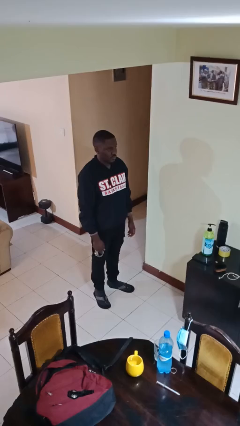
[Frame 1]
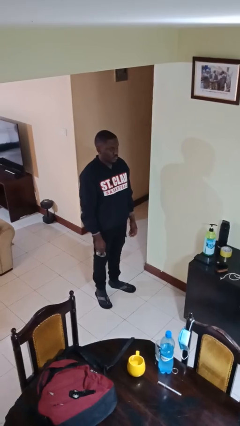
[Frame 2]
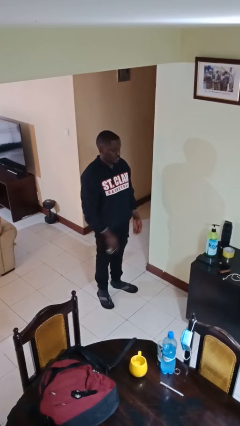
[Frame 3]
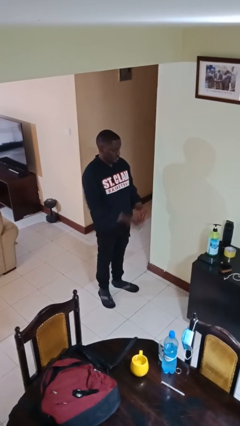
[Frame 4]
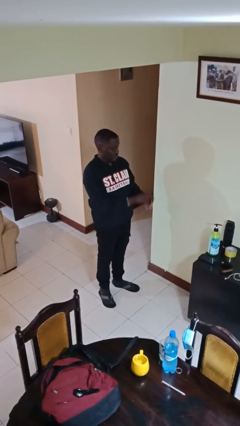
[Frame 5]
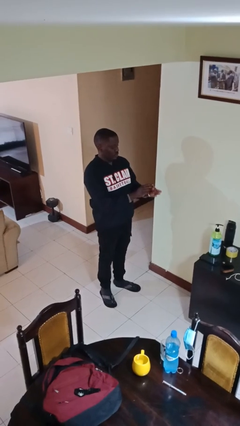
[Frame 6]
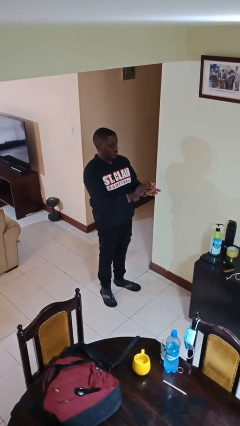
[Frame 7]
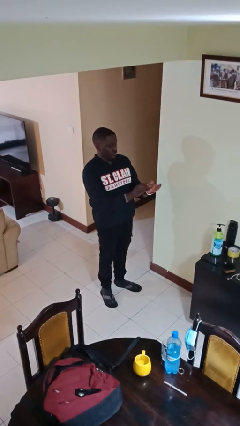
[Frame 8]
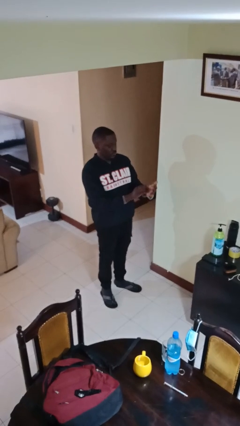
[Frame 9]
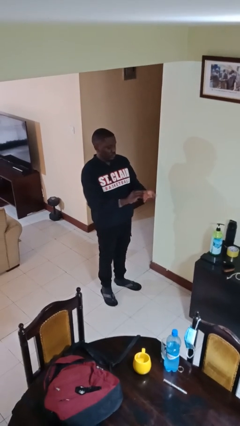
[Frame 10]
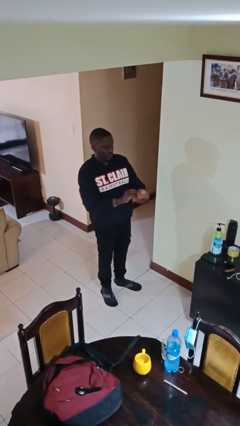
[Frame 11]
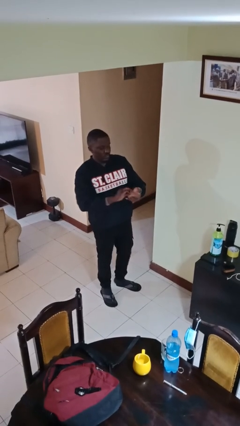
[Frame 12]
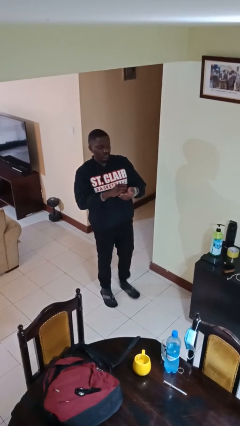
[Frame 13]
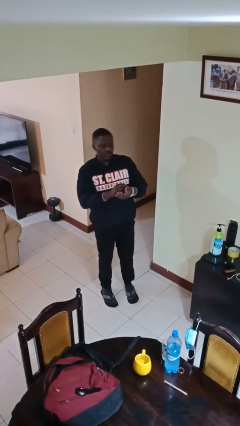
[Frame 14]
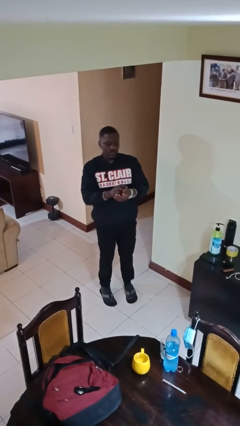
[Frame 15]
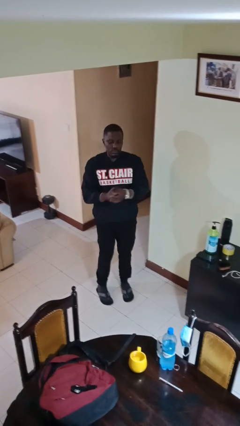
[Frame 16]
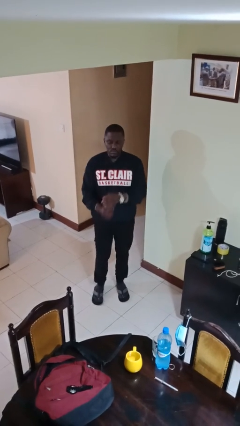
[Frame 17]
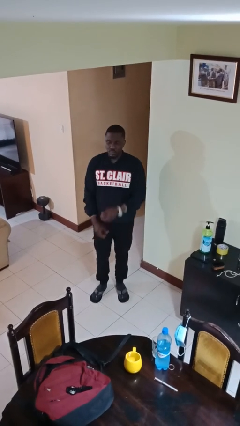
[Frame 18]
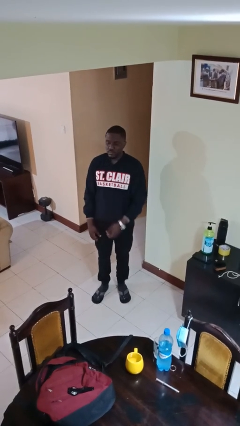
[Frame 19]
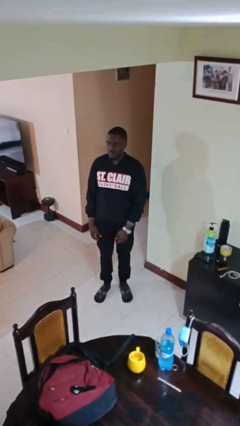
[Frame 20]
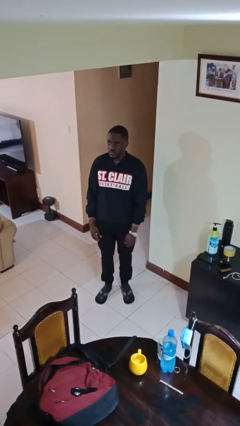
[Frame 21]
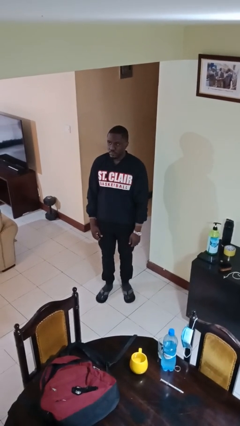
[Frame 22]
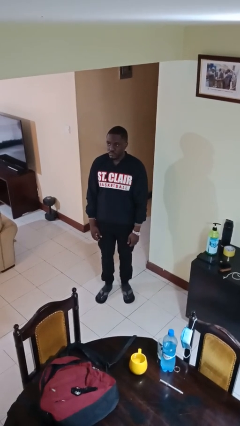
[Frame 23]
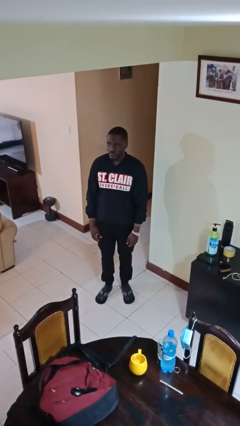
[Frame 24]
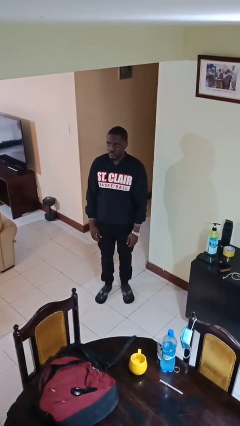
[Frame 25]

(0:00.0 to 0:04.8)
person puts on wristwatch

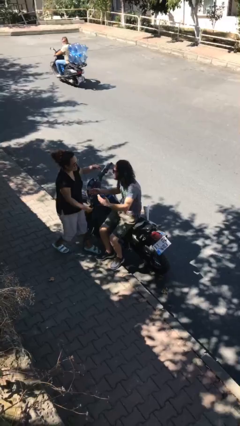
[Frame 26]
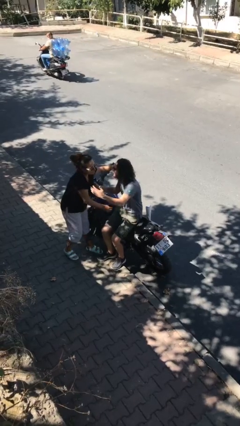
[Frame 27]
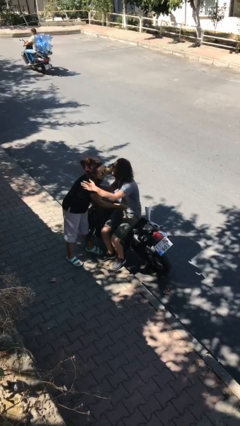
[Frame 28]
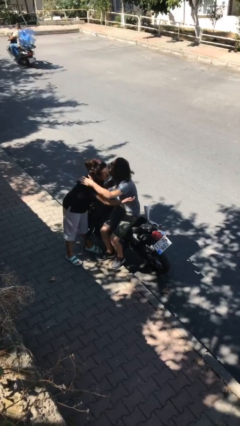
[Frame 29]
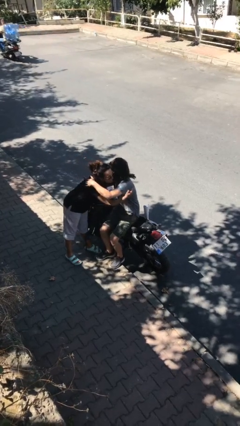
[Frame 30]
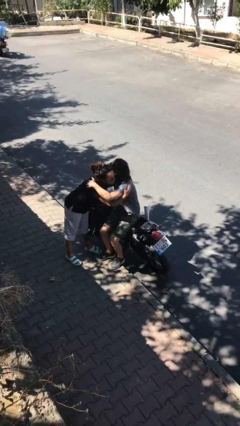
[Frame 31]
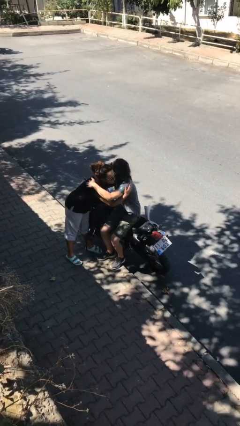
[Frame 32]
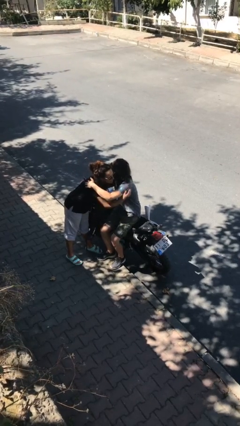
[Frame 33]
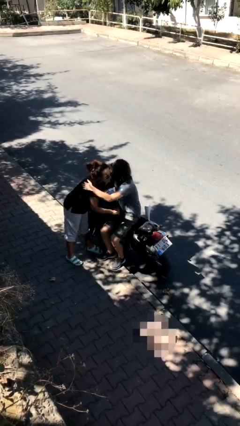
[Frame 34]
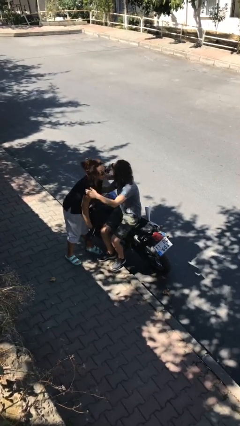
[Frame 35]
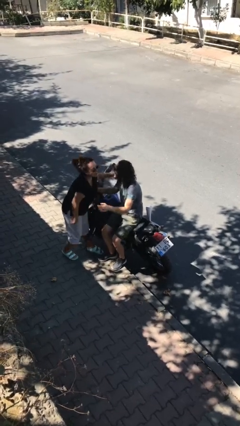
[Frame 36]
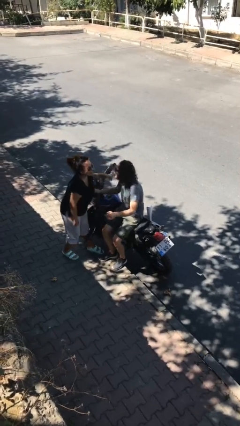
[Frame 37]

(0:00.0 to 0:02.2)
person embraces person

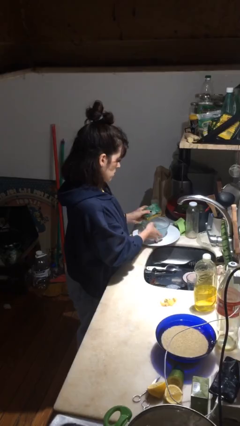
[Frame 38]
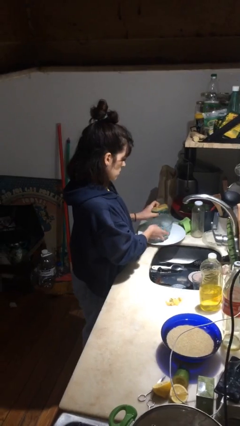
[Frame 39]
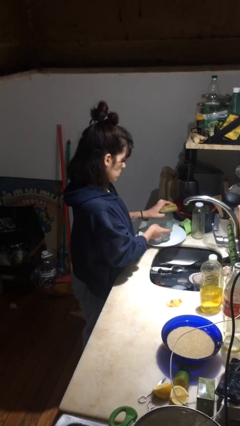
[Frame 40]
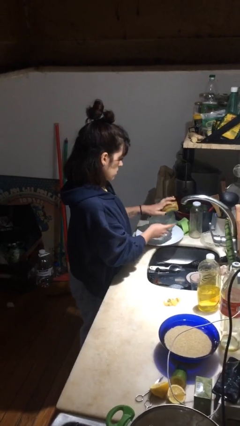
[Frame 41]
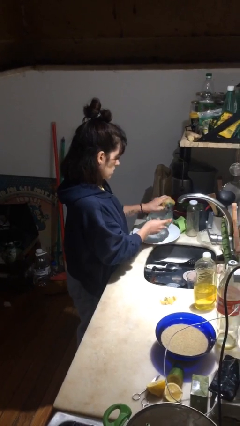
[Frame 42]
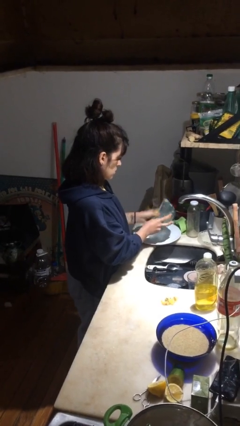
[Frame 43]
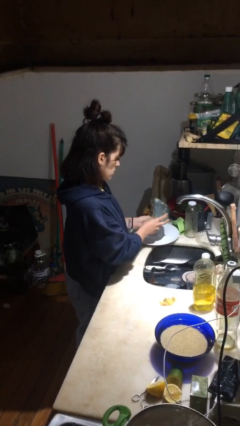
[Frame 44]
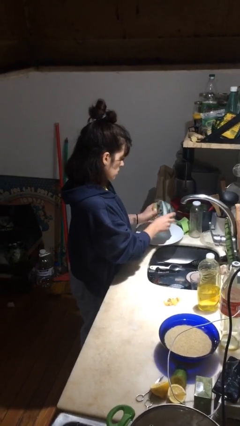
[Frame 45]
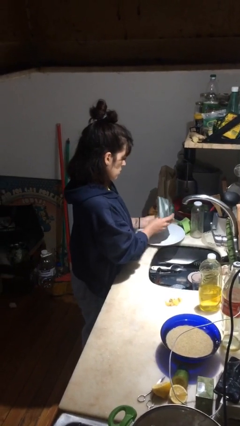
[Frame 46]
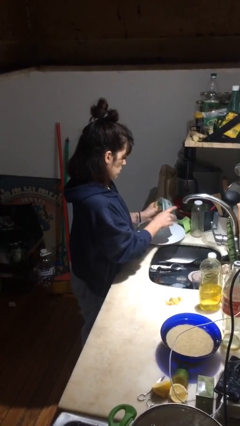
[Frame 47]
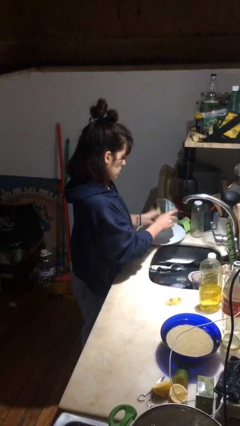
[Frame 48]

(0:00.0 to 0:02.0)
person washes dish

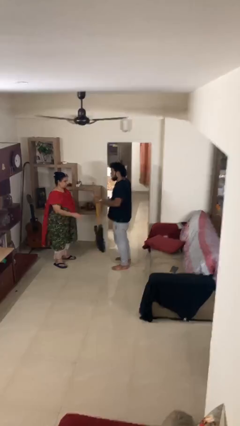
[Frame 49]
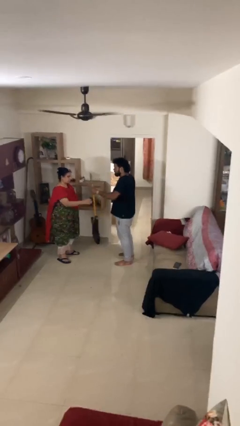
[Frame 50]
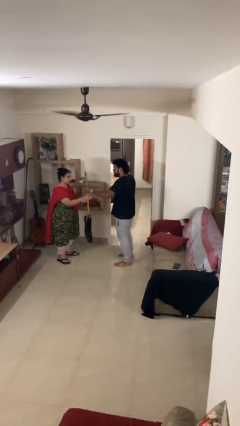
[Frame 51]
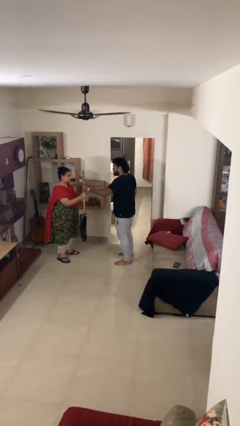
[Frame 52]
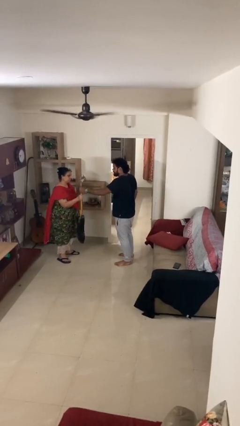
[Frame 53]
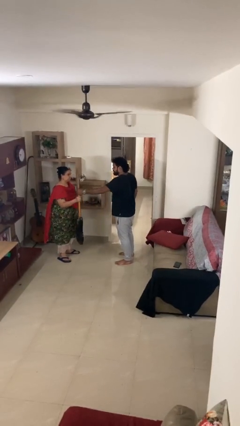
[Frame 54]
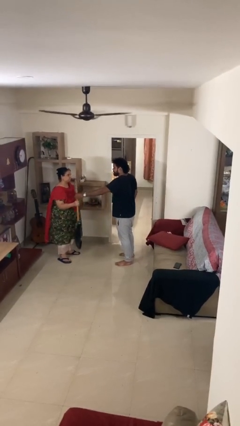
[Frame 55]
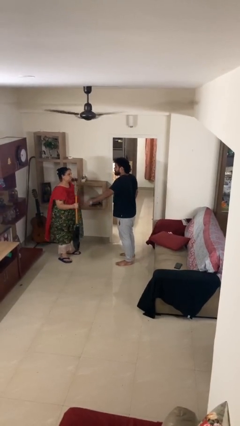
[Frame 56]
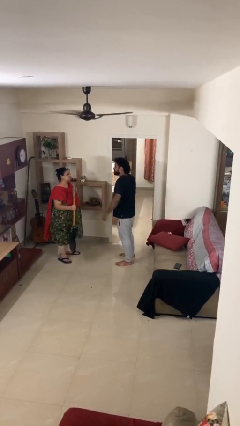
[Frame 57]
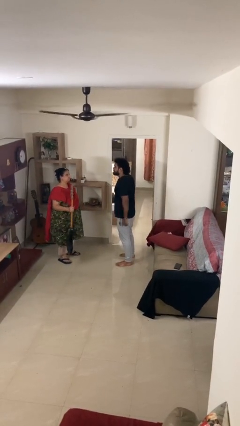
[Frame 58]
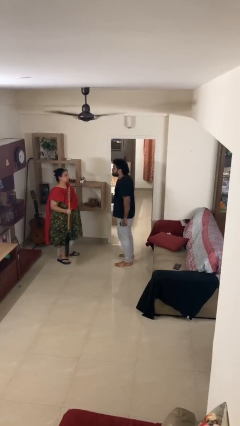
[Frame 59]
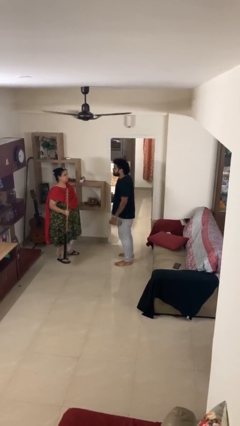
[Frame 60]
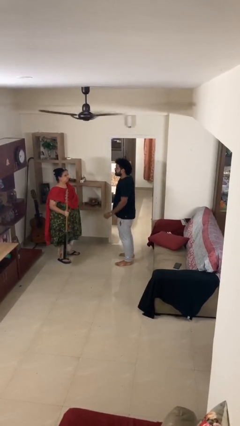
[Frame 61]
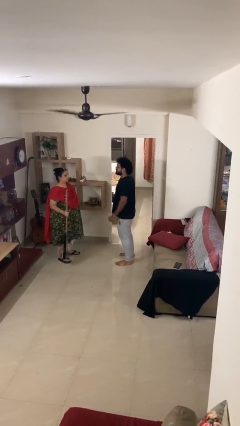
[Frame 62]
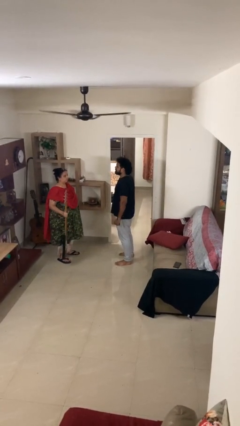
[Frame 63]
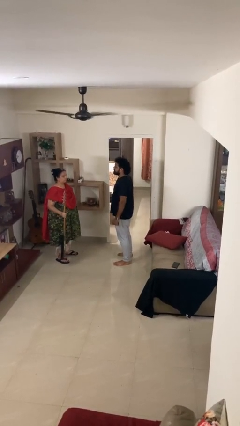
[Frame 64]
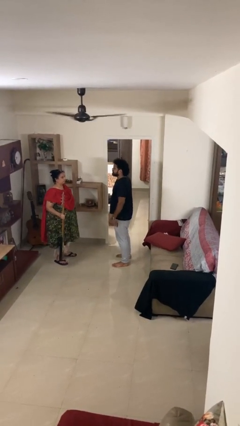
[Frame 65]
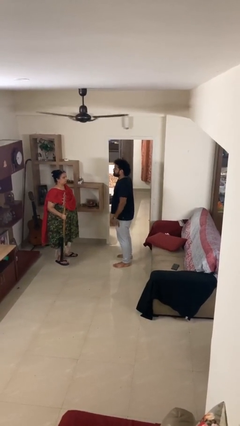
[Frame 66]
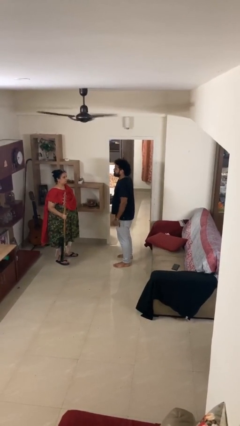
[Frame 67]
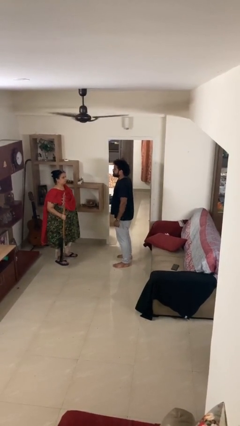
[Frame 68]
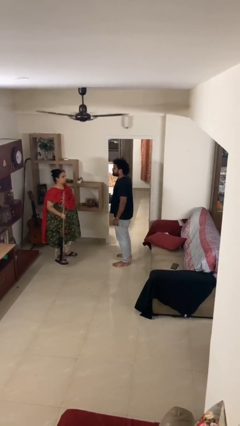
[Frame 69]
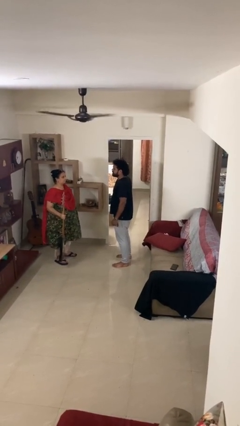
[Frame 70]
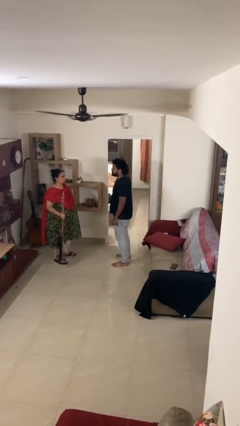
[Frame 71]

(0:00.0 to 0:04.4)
person transfers object to person

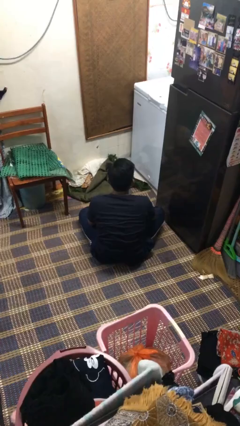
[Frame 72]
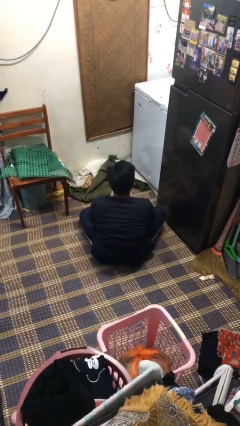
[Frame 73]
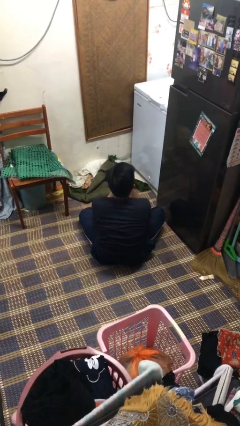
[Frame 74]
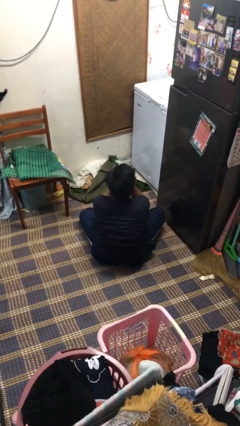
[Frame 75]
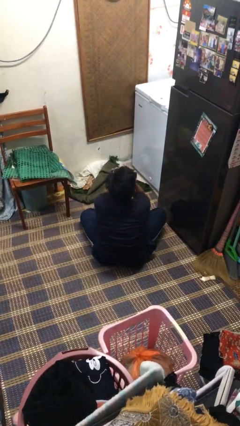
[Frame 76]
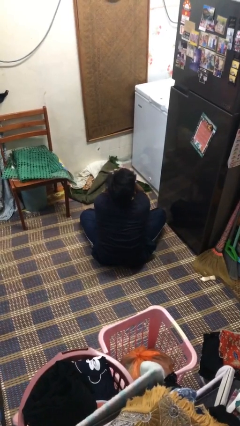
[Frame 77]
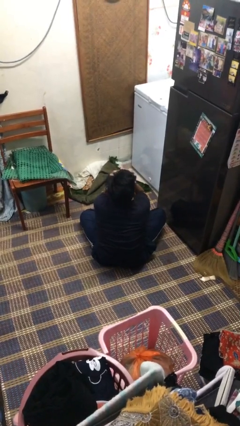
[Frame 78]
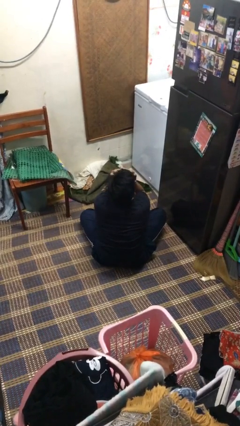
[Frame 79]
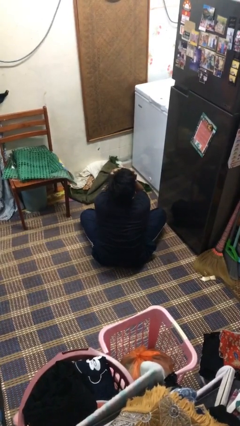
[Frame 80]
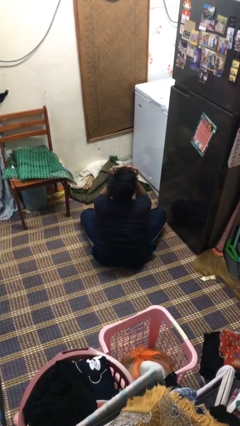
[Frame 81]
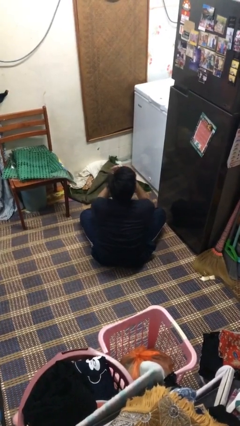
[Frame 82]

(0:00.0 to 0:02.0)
person covers face with hands

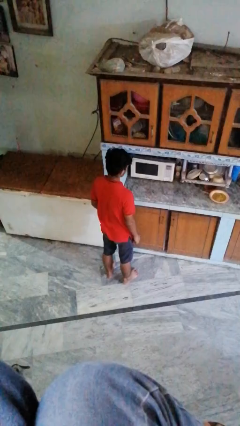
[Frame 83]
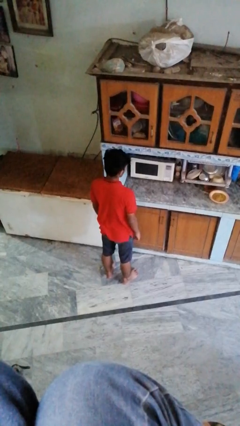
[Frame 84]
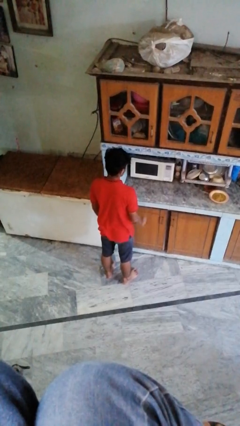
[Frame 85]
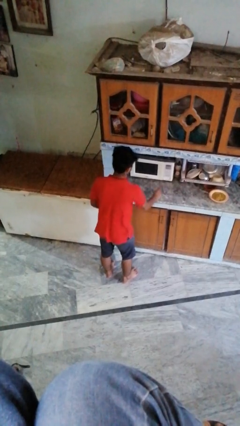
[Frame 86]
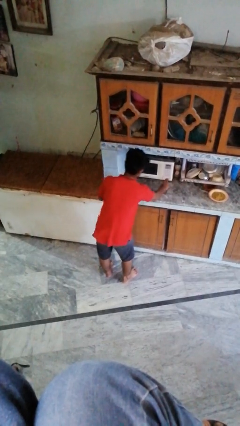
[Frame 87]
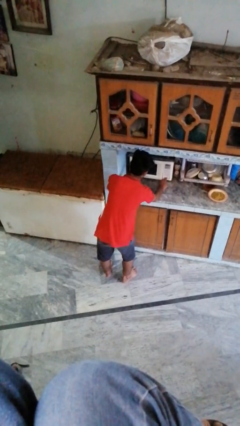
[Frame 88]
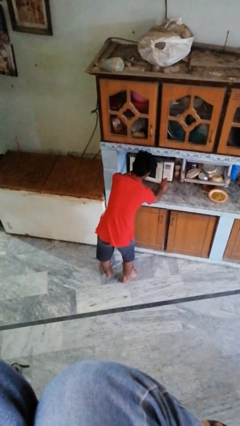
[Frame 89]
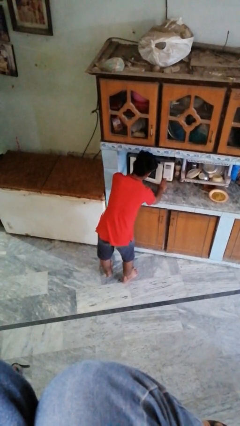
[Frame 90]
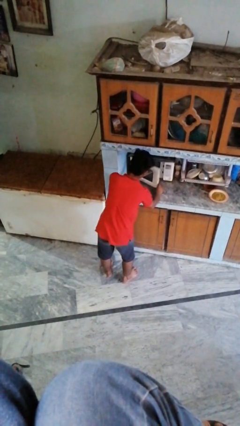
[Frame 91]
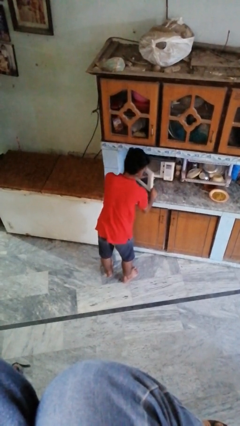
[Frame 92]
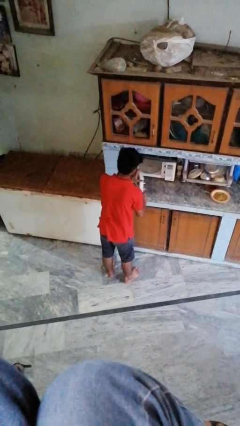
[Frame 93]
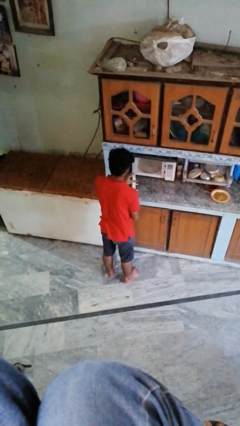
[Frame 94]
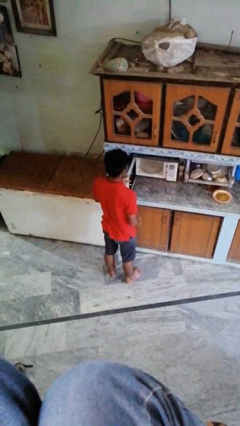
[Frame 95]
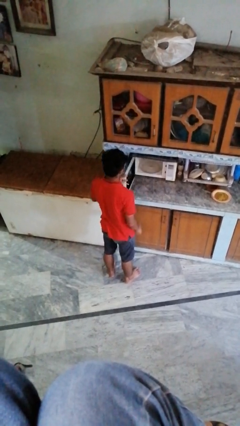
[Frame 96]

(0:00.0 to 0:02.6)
person opens oven door
